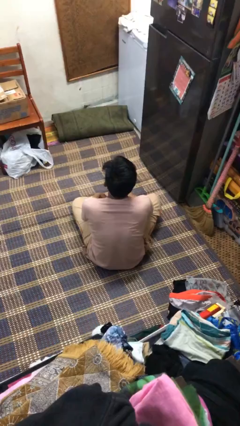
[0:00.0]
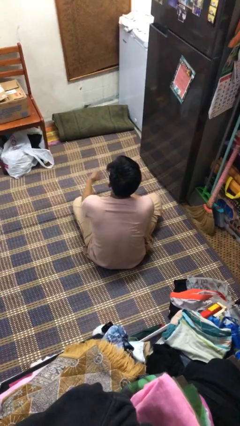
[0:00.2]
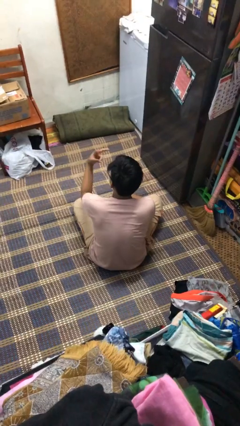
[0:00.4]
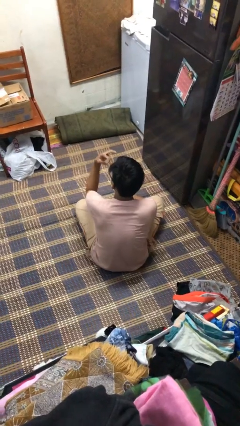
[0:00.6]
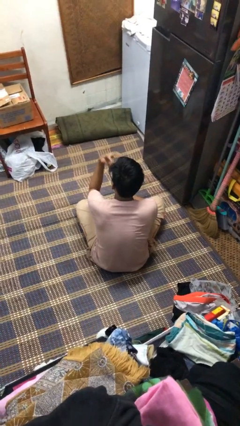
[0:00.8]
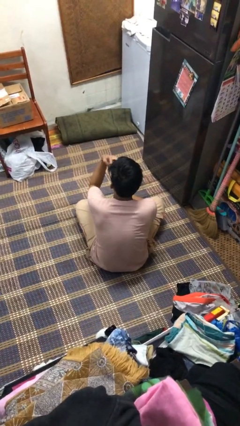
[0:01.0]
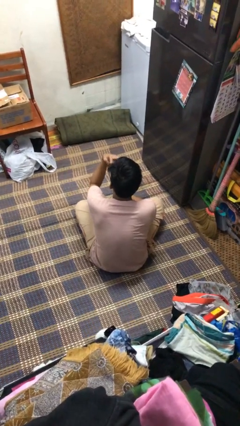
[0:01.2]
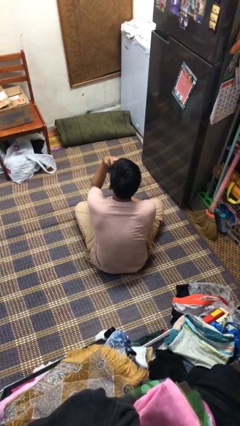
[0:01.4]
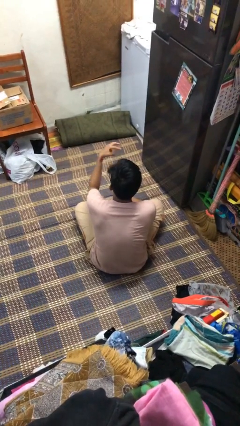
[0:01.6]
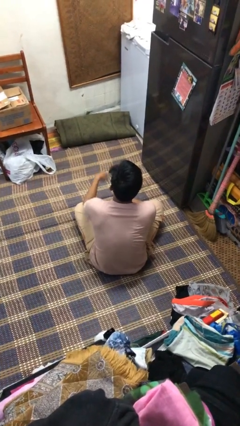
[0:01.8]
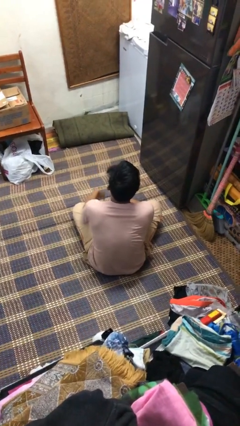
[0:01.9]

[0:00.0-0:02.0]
person gestures watch closely

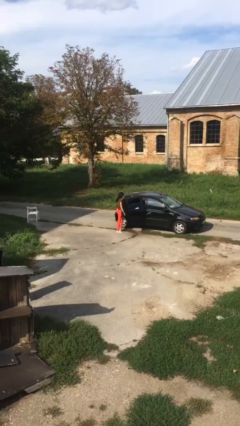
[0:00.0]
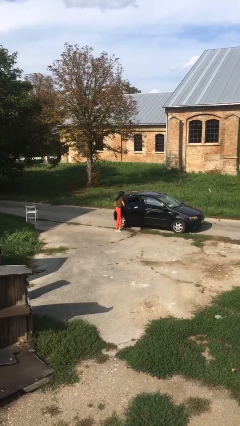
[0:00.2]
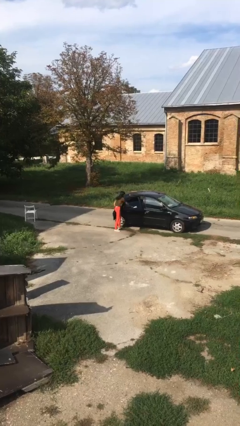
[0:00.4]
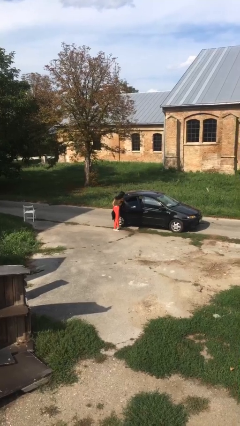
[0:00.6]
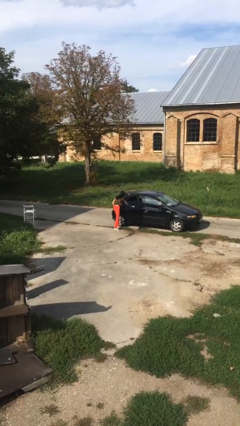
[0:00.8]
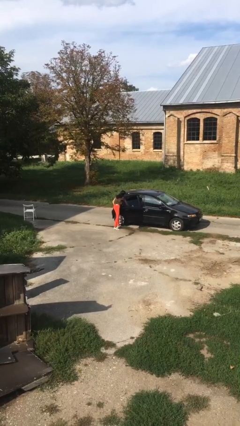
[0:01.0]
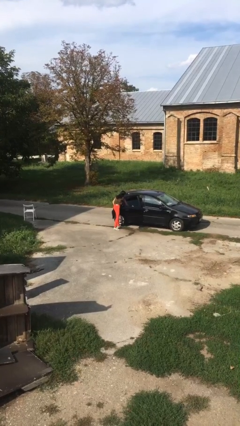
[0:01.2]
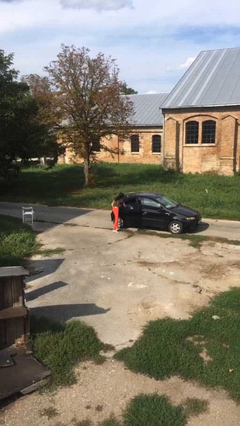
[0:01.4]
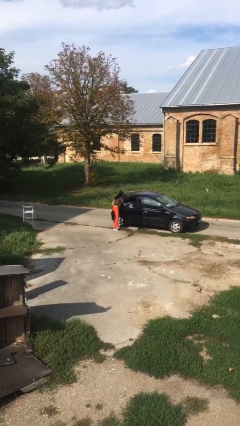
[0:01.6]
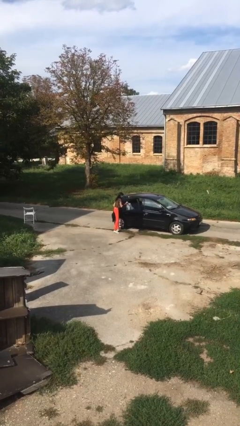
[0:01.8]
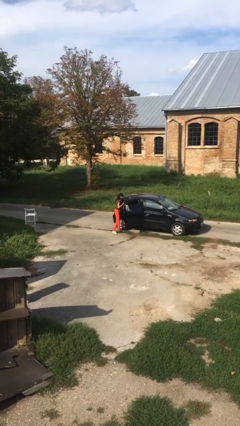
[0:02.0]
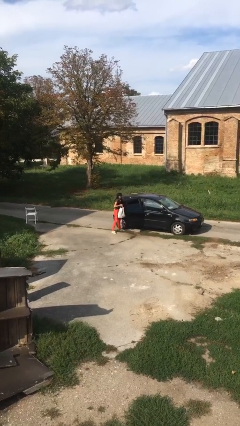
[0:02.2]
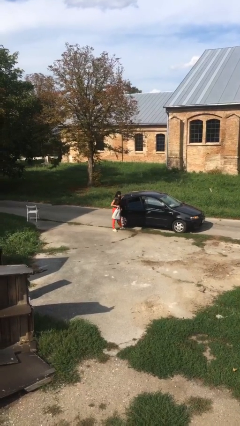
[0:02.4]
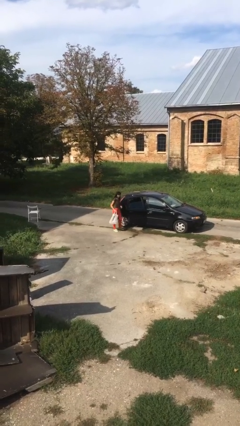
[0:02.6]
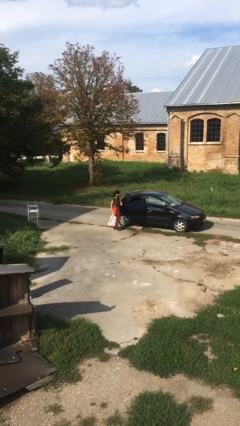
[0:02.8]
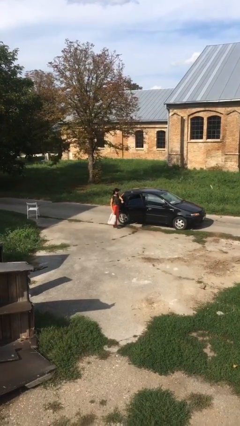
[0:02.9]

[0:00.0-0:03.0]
person unloads car

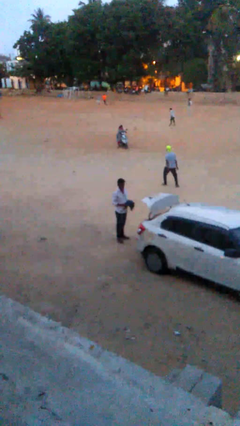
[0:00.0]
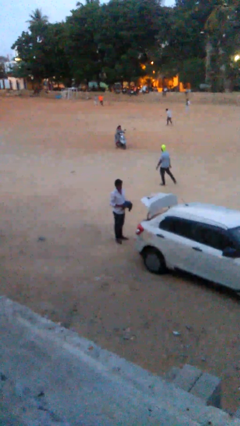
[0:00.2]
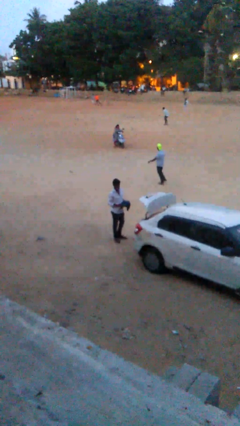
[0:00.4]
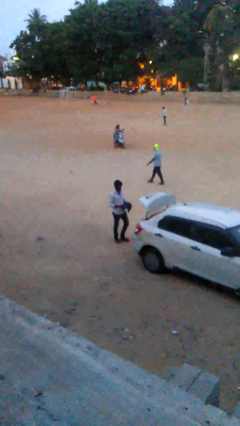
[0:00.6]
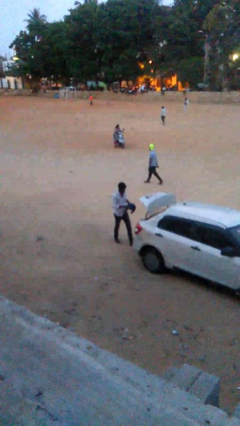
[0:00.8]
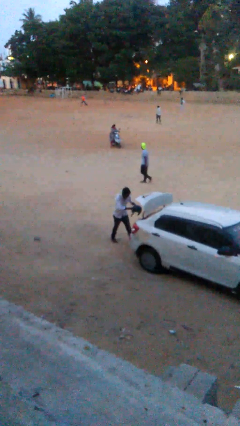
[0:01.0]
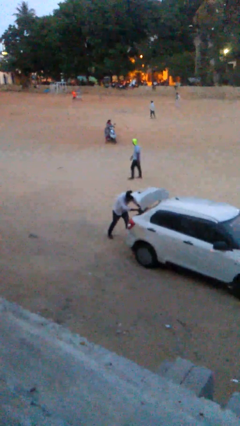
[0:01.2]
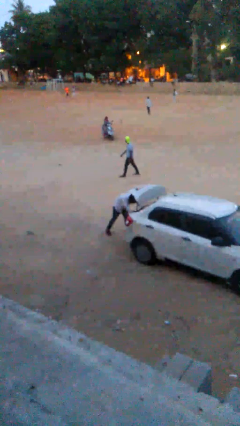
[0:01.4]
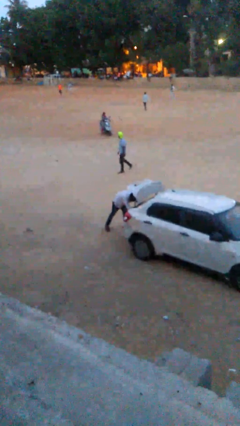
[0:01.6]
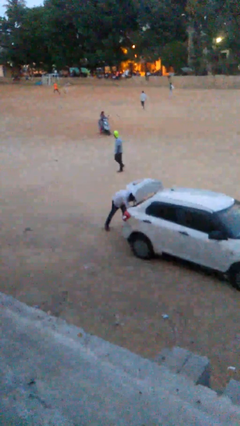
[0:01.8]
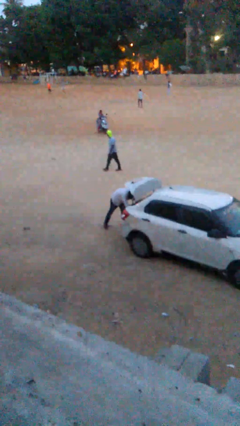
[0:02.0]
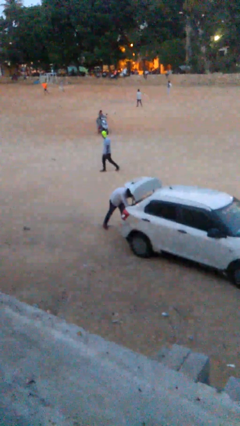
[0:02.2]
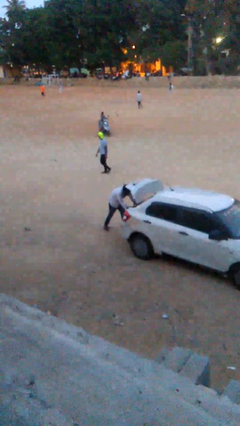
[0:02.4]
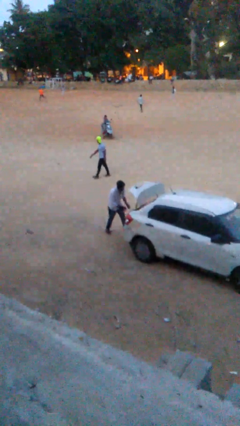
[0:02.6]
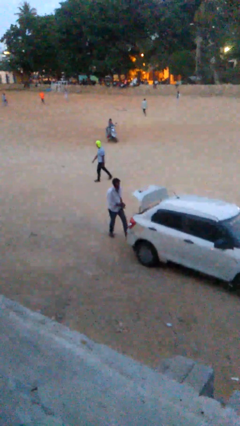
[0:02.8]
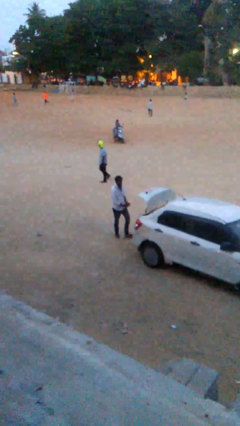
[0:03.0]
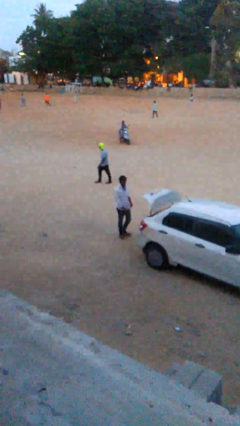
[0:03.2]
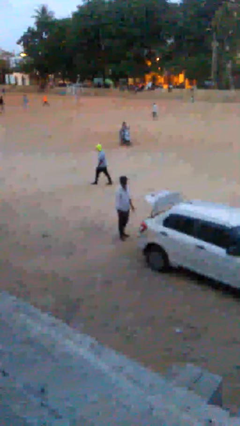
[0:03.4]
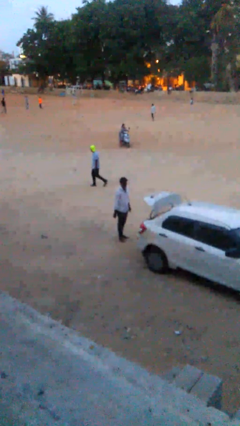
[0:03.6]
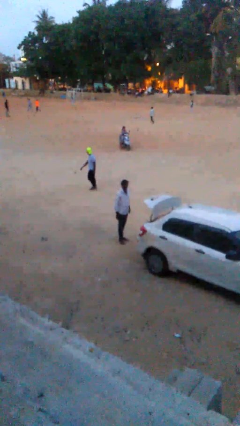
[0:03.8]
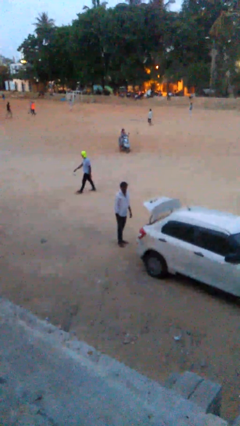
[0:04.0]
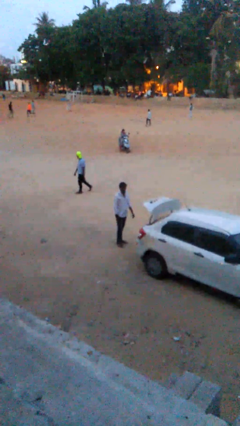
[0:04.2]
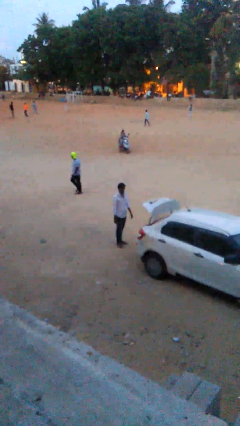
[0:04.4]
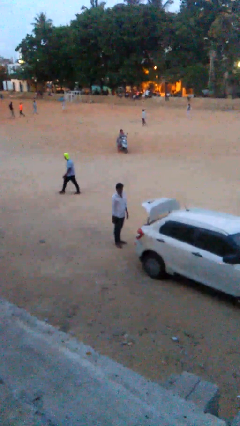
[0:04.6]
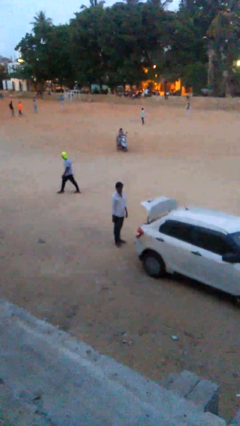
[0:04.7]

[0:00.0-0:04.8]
person loads car

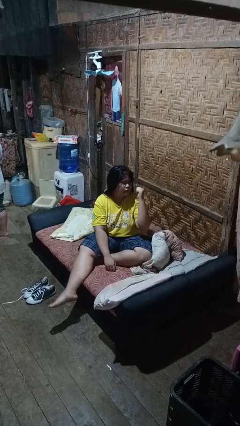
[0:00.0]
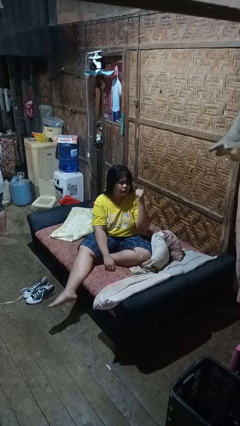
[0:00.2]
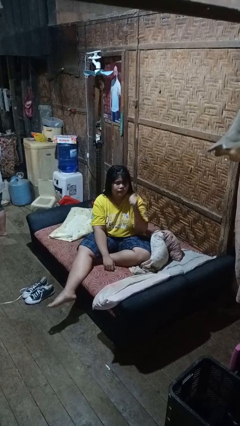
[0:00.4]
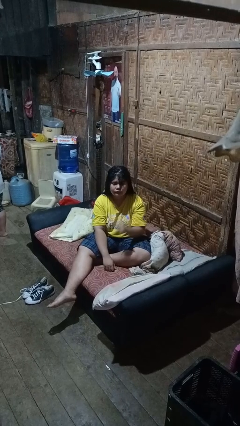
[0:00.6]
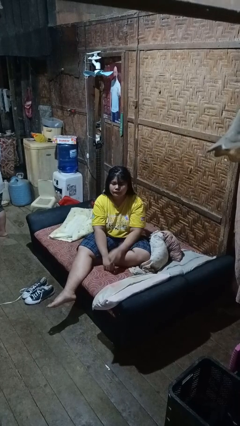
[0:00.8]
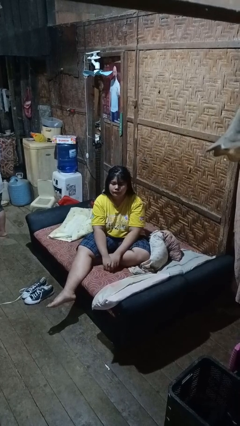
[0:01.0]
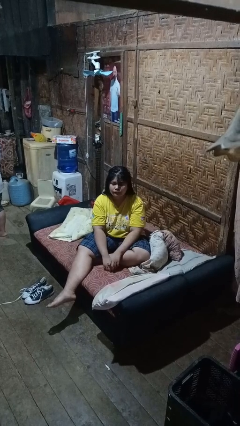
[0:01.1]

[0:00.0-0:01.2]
person gestures behind me

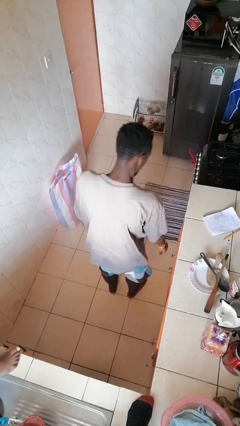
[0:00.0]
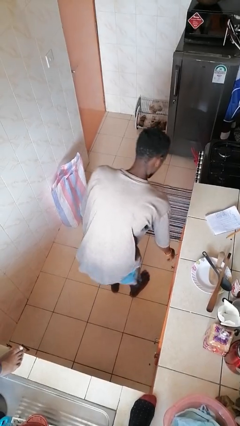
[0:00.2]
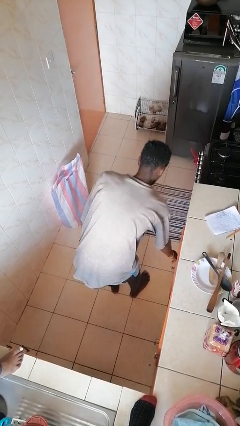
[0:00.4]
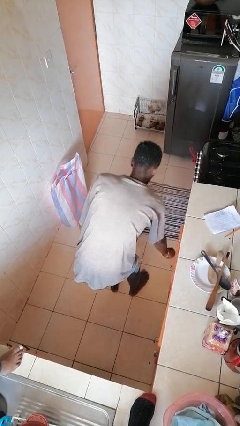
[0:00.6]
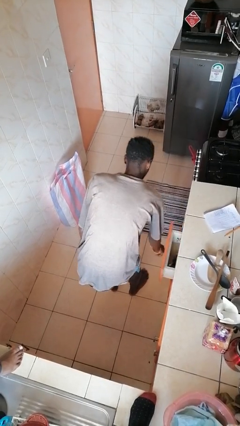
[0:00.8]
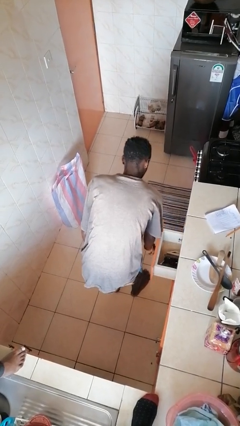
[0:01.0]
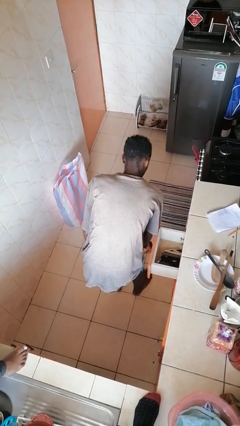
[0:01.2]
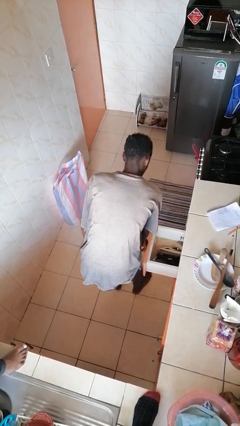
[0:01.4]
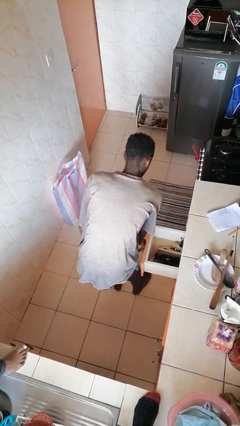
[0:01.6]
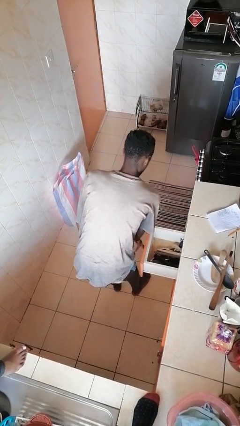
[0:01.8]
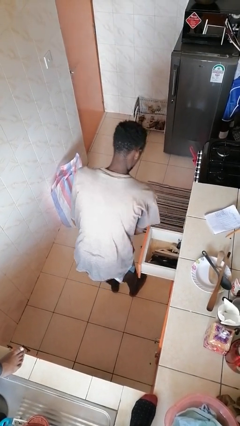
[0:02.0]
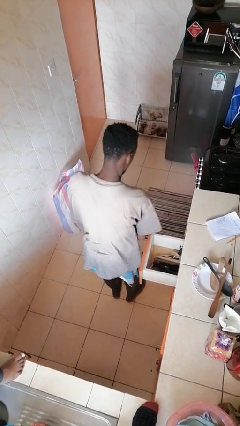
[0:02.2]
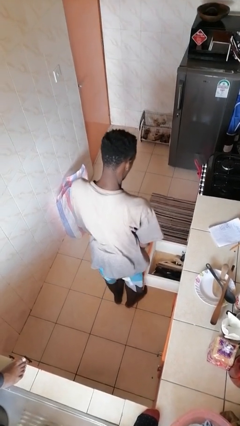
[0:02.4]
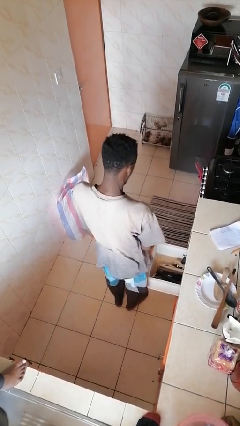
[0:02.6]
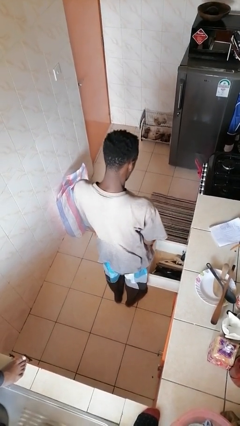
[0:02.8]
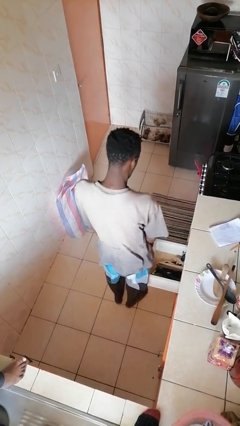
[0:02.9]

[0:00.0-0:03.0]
person opens kitchen drawer

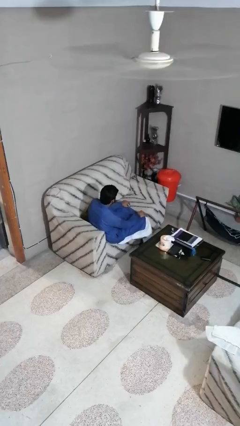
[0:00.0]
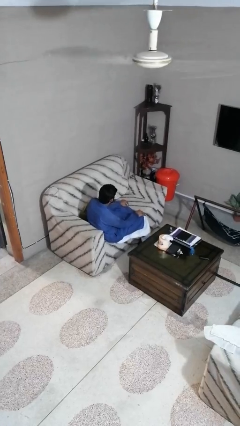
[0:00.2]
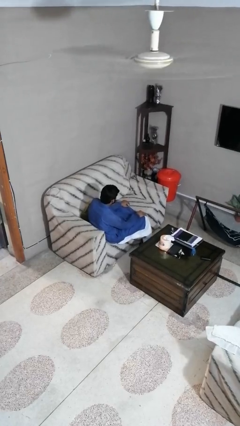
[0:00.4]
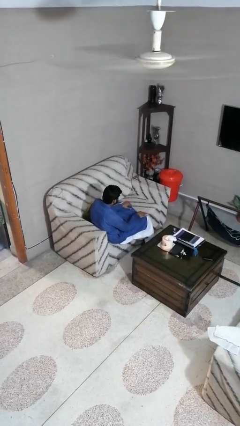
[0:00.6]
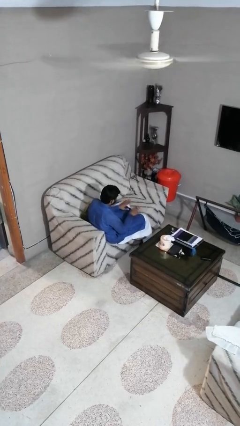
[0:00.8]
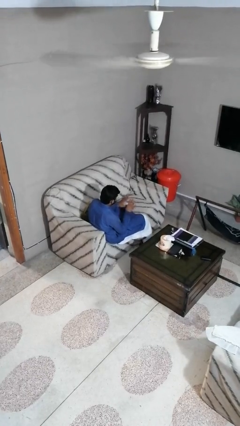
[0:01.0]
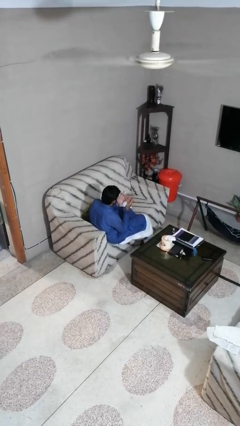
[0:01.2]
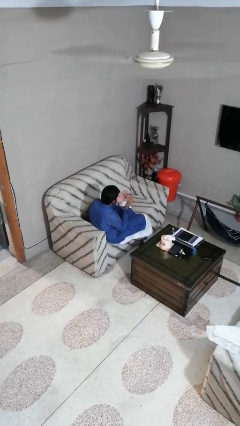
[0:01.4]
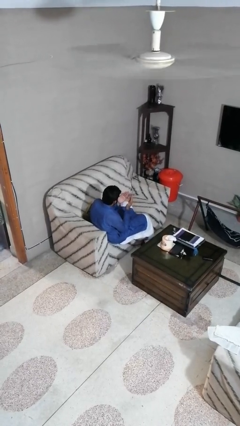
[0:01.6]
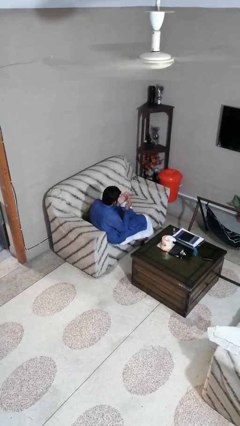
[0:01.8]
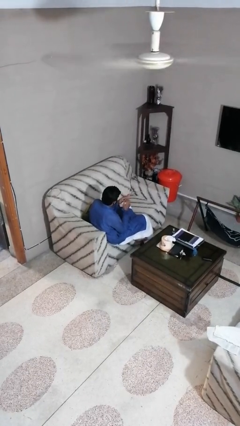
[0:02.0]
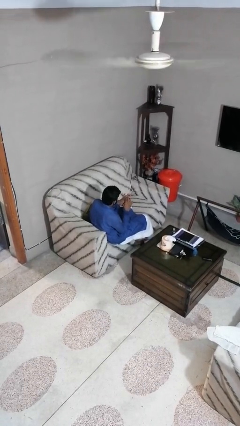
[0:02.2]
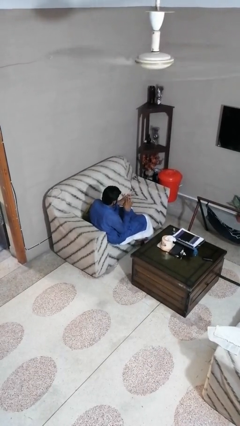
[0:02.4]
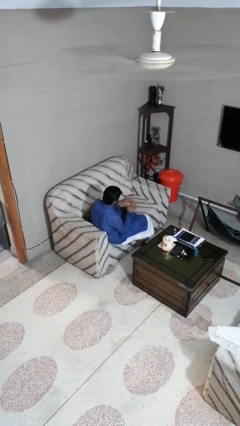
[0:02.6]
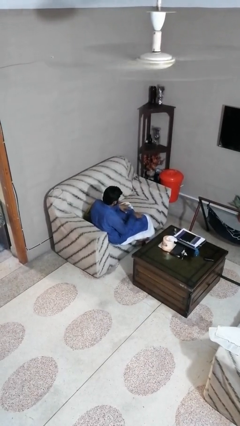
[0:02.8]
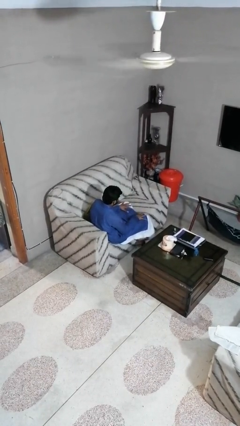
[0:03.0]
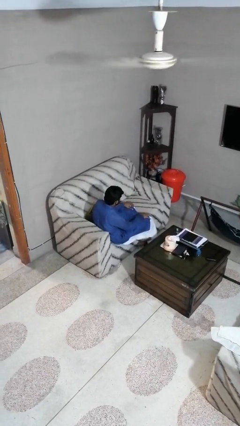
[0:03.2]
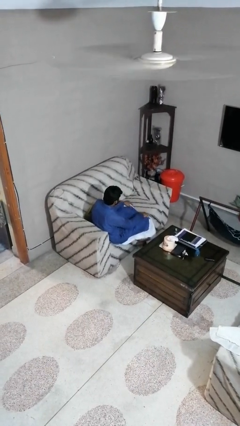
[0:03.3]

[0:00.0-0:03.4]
person looks at hands in lap
